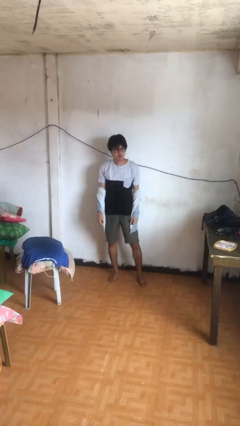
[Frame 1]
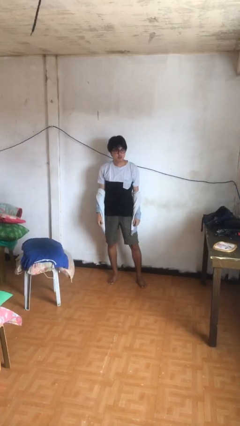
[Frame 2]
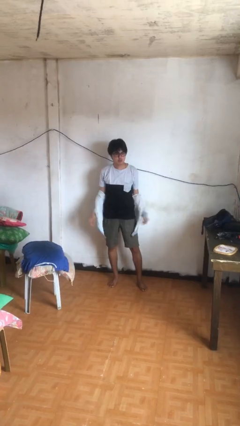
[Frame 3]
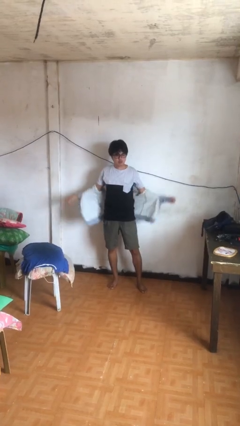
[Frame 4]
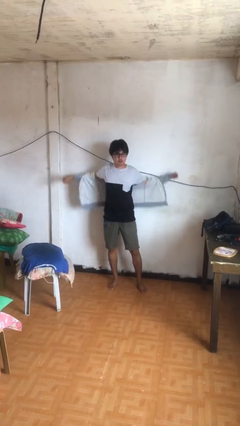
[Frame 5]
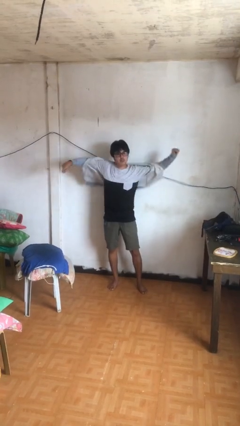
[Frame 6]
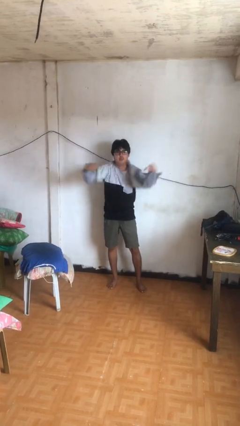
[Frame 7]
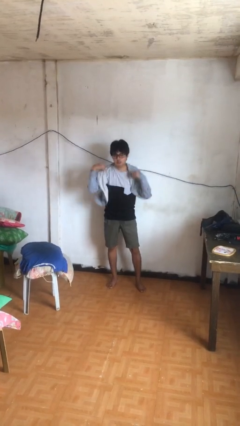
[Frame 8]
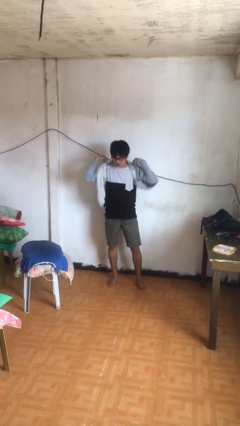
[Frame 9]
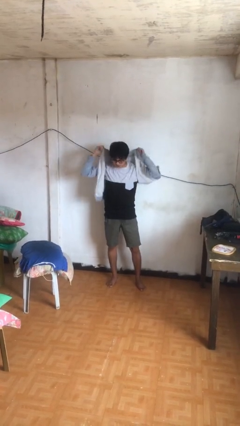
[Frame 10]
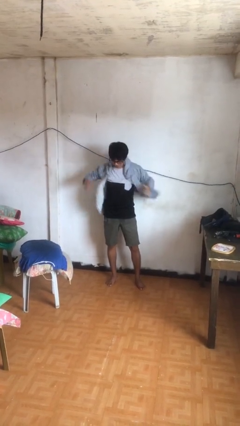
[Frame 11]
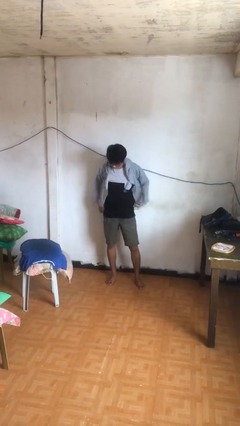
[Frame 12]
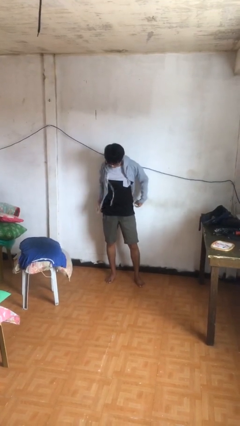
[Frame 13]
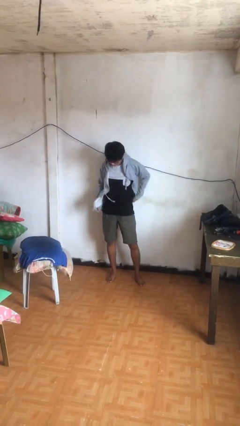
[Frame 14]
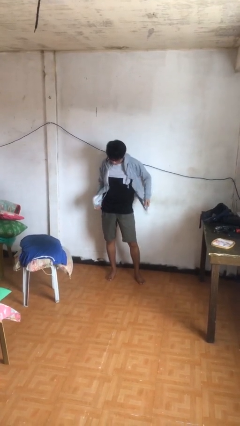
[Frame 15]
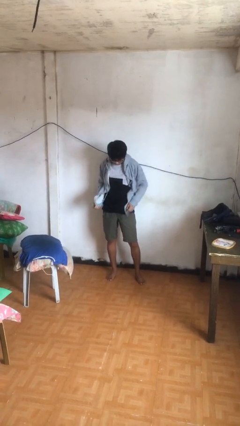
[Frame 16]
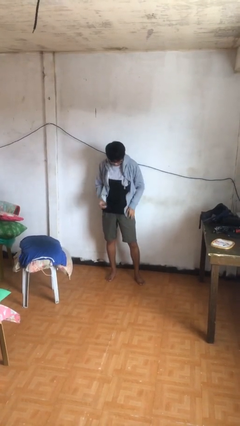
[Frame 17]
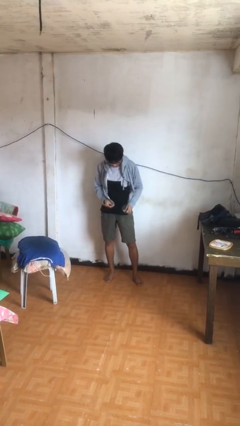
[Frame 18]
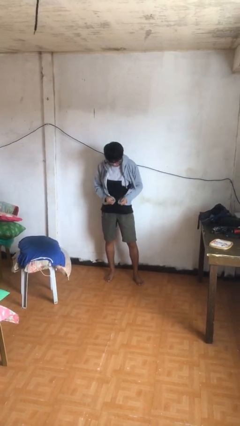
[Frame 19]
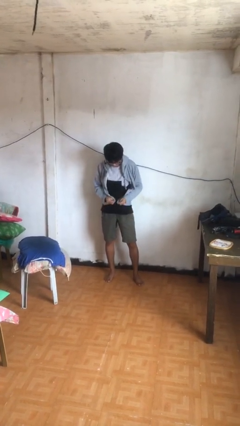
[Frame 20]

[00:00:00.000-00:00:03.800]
person puts on jacket

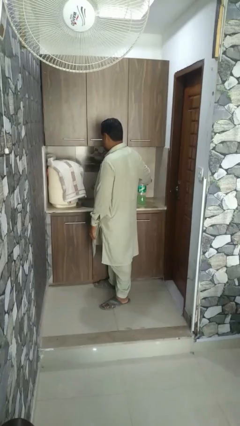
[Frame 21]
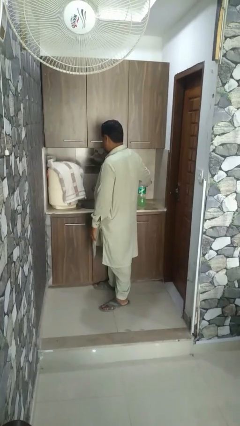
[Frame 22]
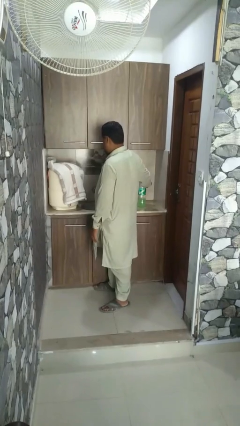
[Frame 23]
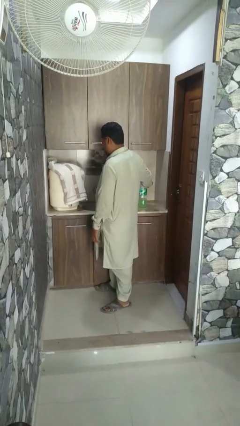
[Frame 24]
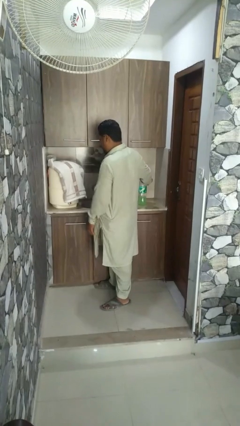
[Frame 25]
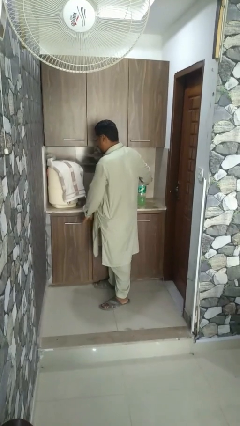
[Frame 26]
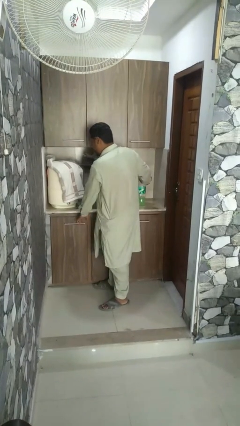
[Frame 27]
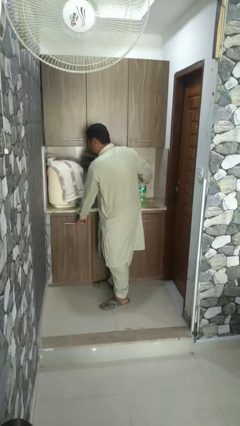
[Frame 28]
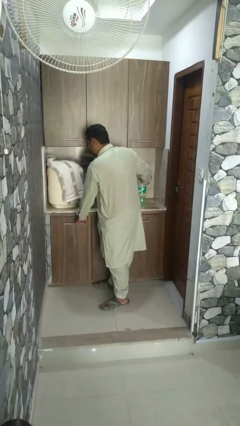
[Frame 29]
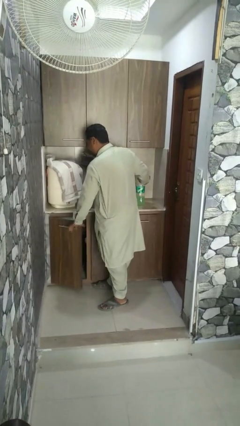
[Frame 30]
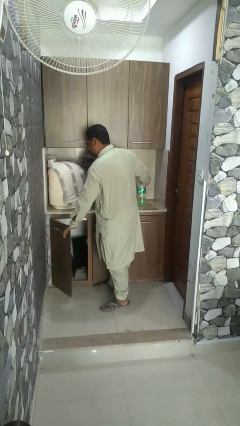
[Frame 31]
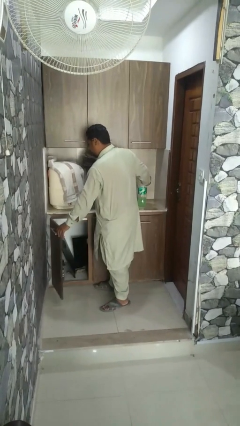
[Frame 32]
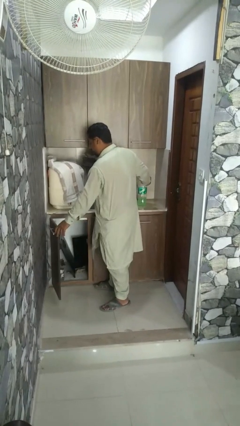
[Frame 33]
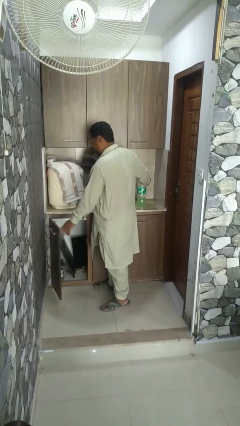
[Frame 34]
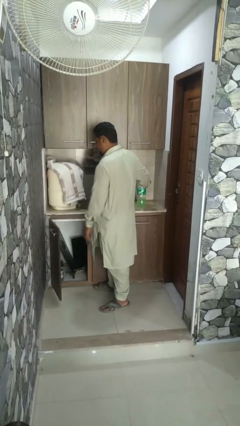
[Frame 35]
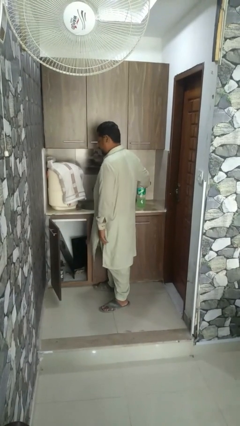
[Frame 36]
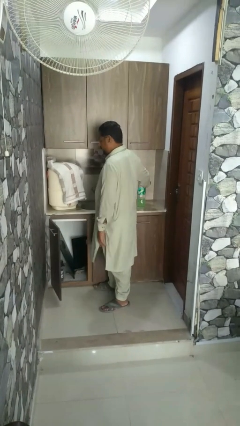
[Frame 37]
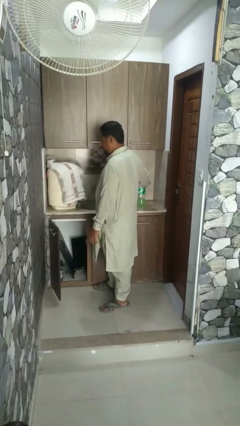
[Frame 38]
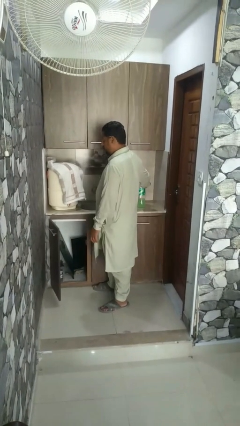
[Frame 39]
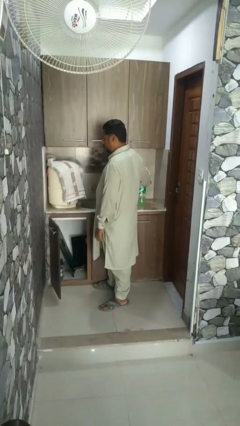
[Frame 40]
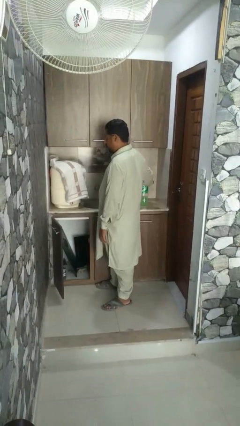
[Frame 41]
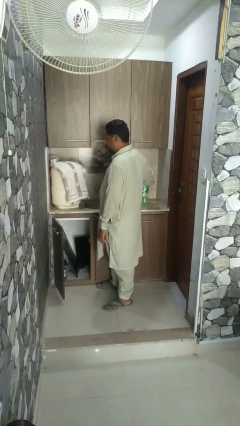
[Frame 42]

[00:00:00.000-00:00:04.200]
person opens refrigerator

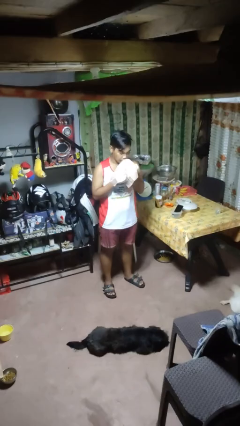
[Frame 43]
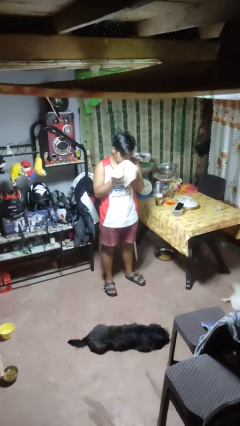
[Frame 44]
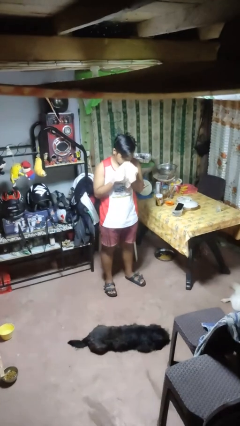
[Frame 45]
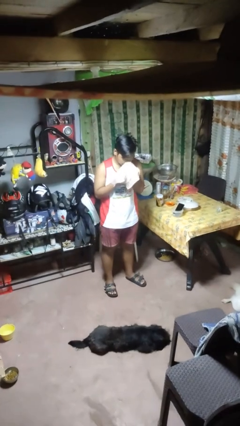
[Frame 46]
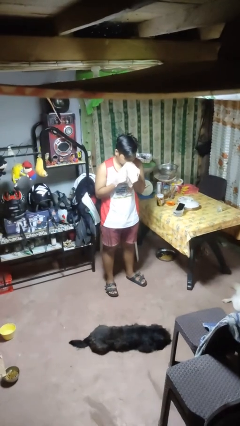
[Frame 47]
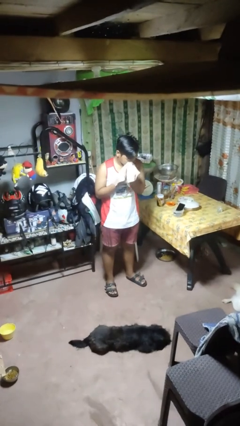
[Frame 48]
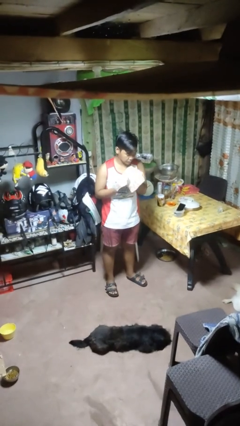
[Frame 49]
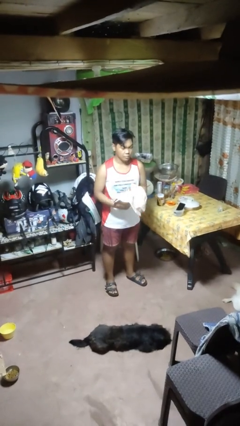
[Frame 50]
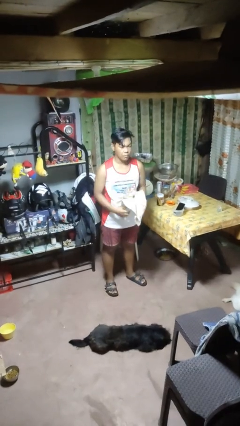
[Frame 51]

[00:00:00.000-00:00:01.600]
person blows nose

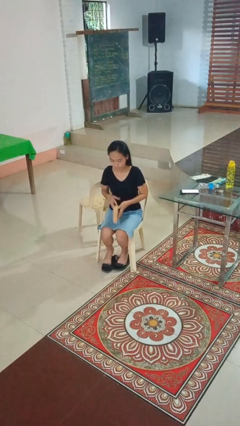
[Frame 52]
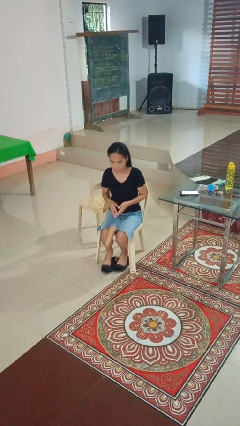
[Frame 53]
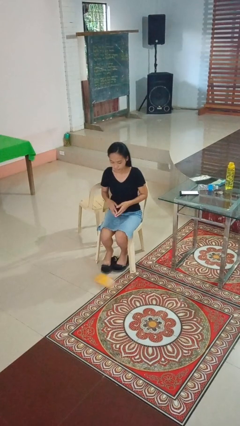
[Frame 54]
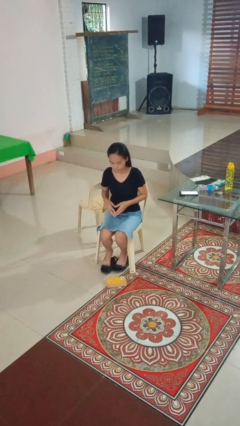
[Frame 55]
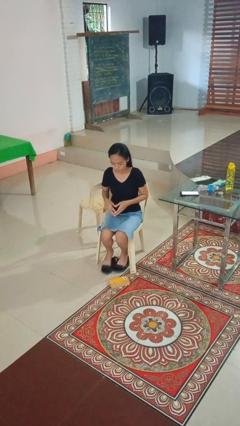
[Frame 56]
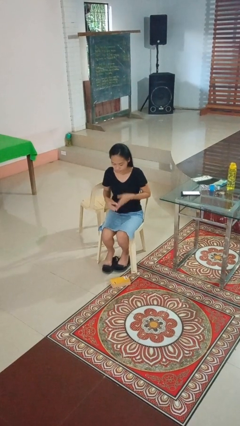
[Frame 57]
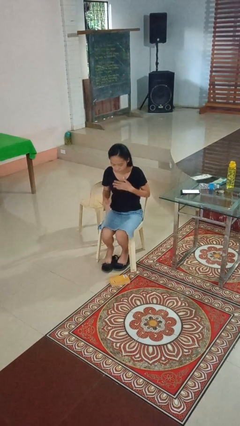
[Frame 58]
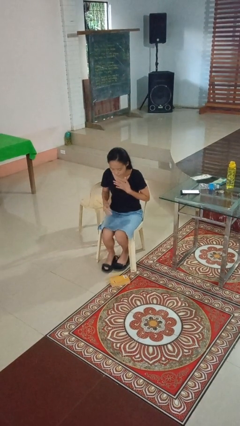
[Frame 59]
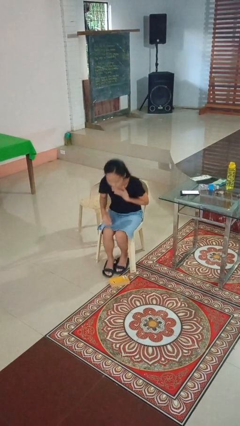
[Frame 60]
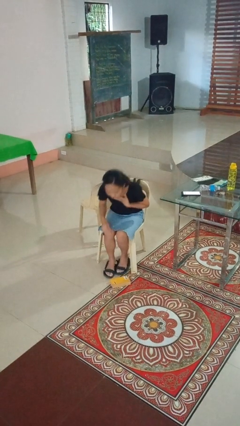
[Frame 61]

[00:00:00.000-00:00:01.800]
person drops object

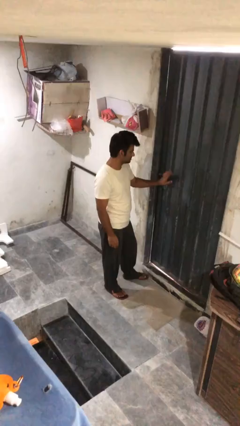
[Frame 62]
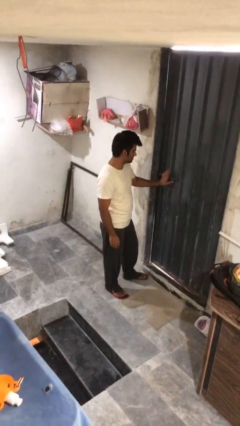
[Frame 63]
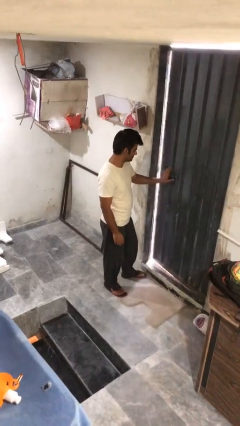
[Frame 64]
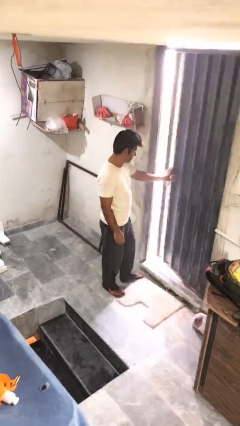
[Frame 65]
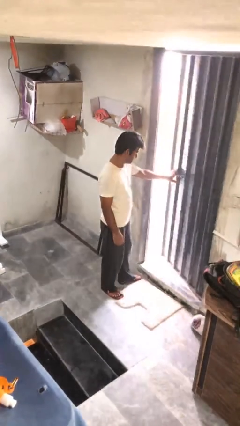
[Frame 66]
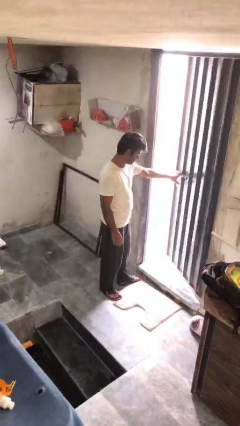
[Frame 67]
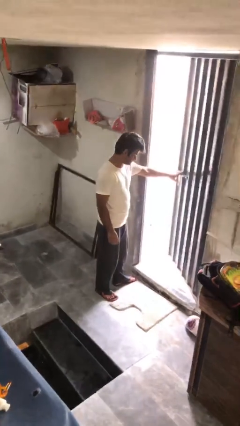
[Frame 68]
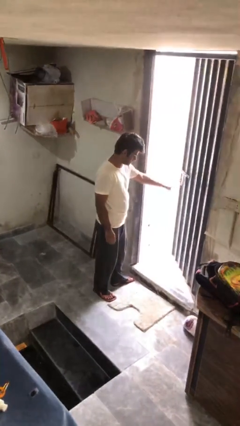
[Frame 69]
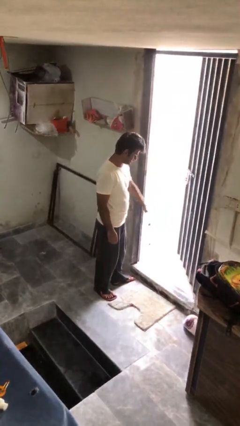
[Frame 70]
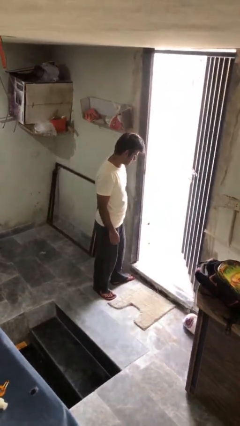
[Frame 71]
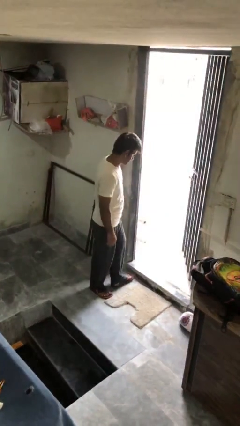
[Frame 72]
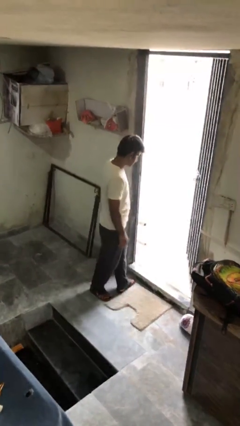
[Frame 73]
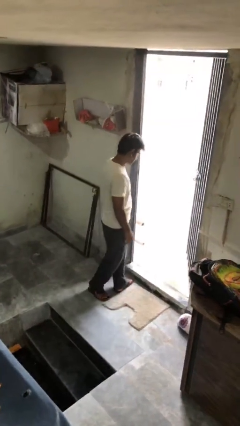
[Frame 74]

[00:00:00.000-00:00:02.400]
person opens facility door

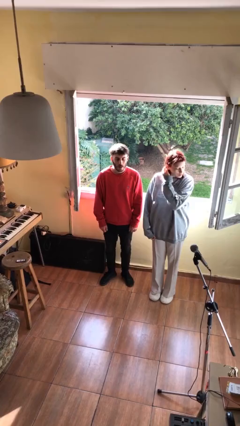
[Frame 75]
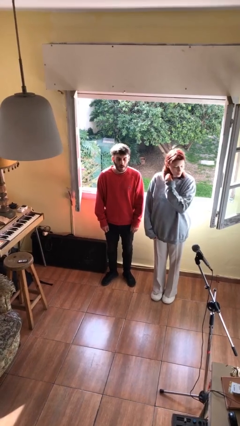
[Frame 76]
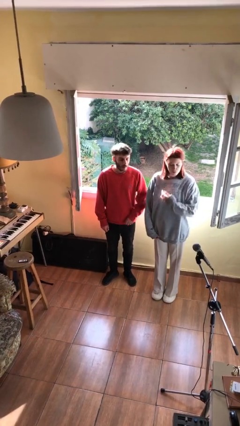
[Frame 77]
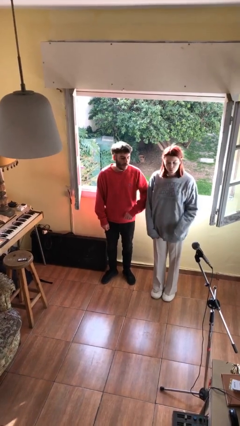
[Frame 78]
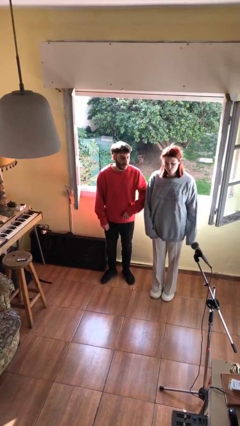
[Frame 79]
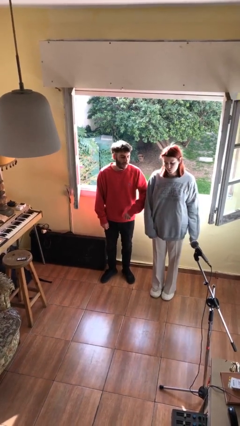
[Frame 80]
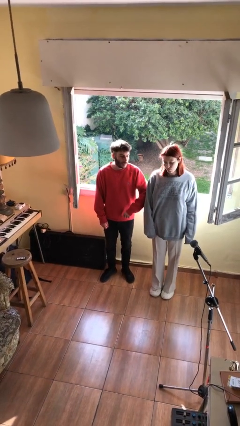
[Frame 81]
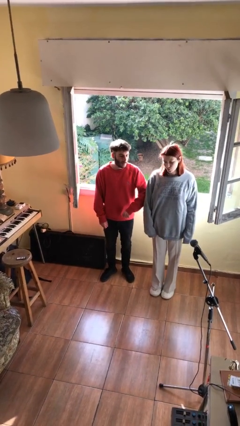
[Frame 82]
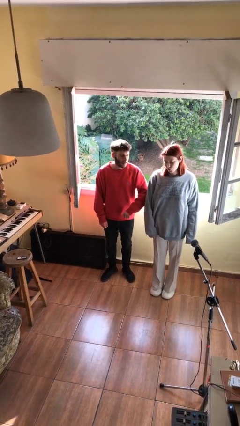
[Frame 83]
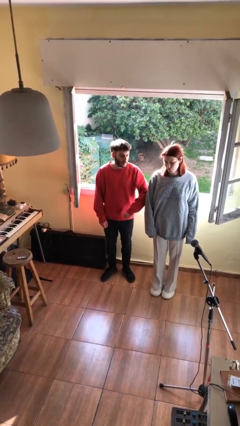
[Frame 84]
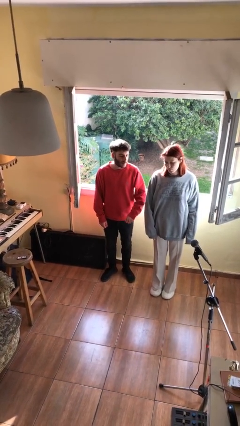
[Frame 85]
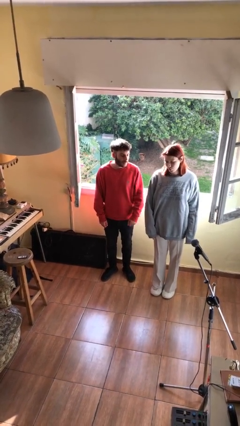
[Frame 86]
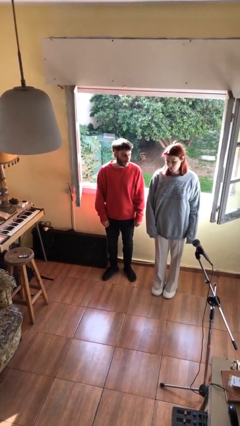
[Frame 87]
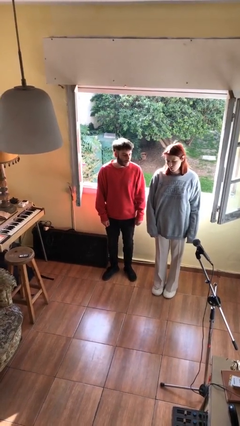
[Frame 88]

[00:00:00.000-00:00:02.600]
person nudges person with elbow
